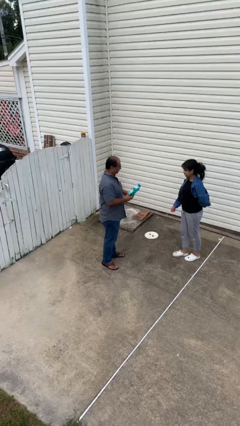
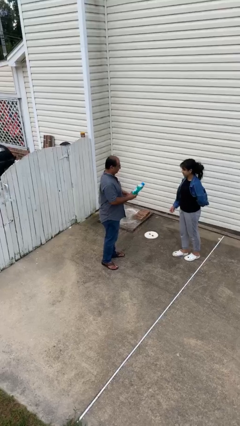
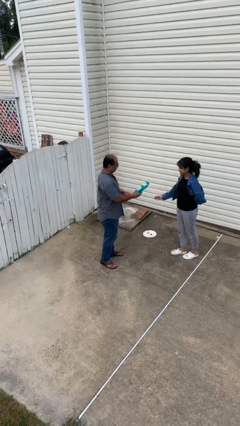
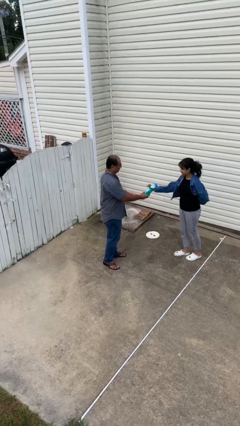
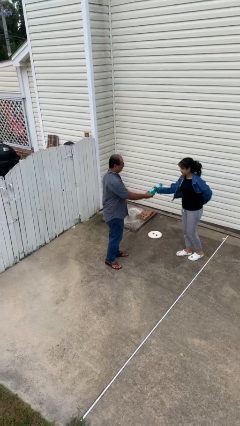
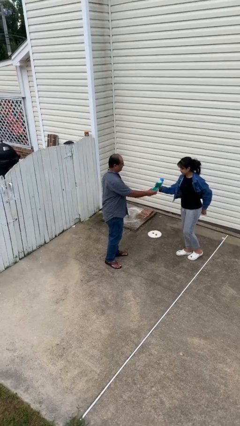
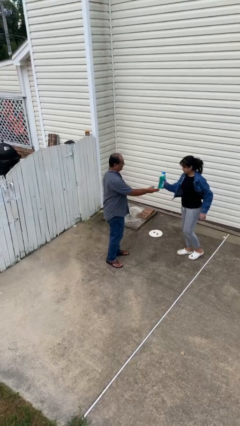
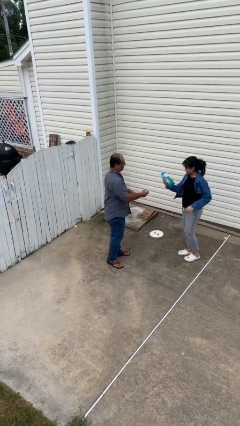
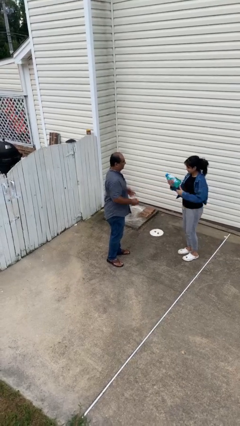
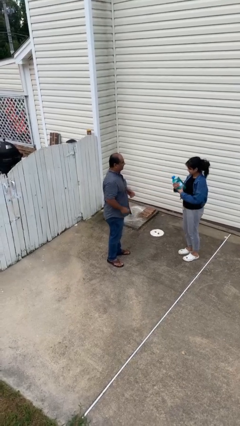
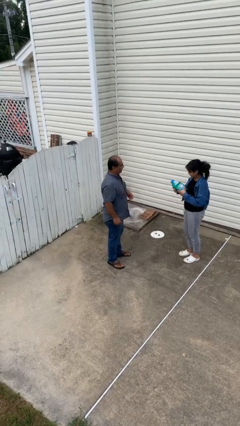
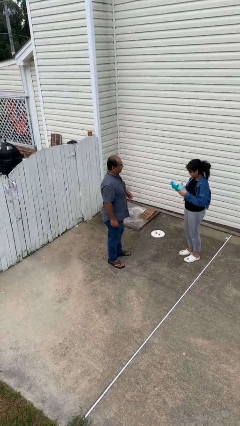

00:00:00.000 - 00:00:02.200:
person transfers object to person

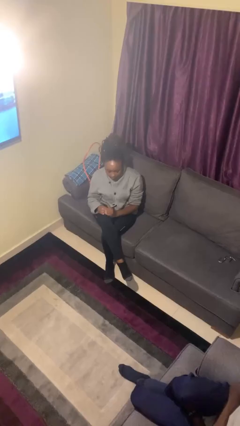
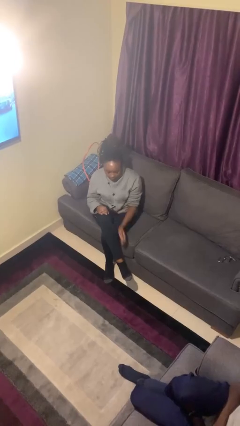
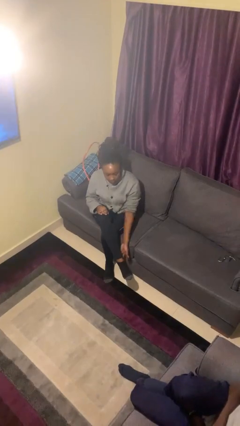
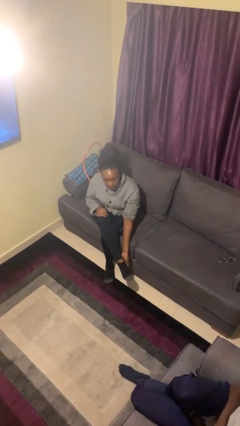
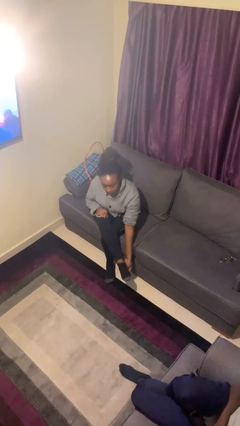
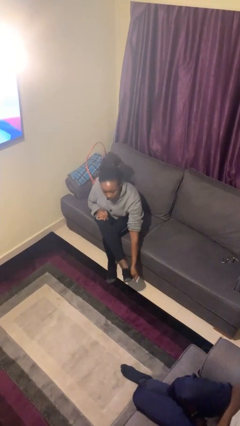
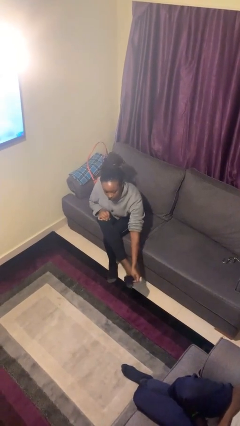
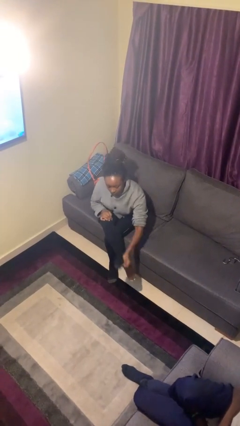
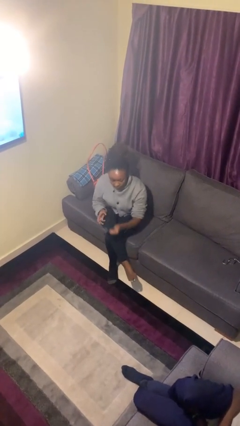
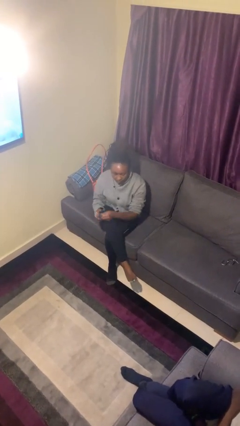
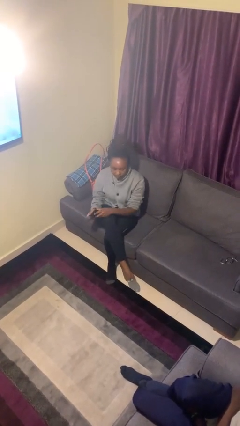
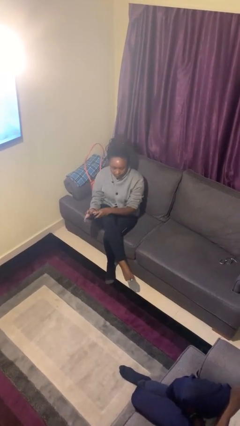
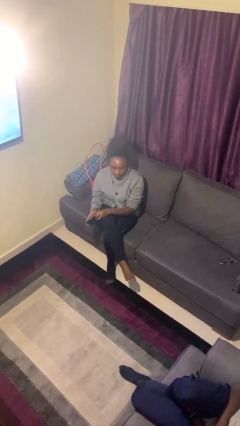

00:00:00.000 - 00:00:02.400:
person takes off socks

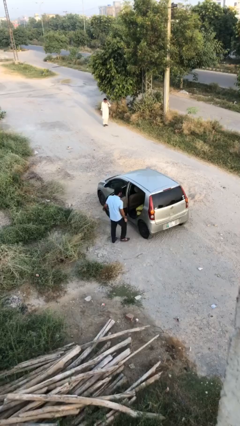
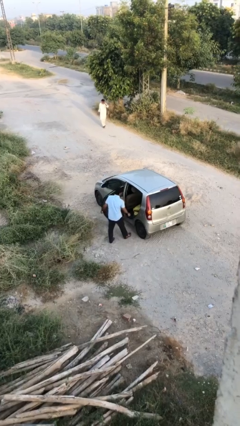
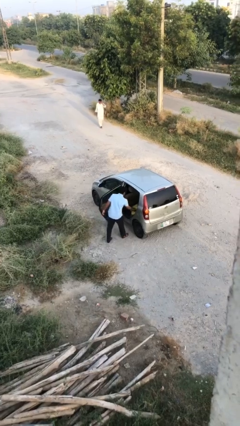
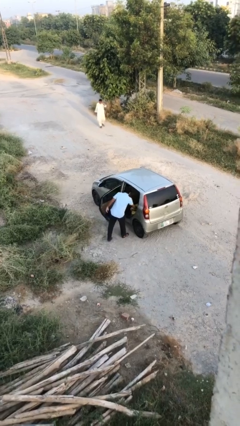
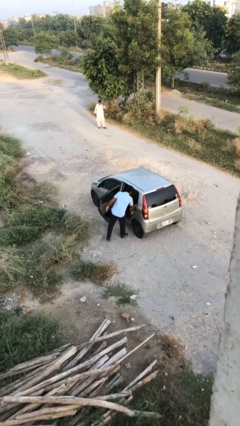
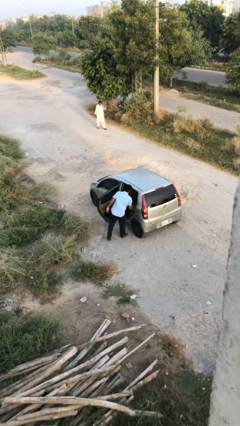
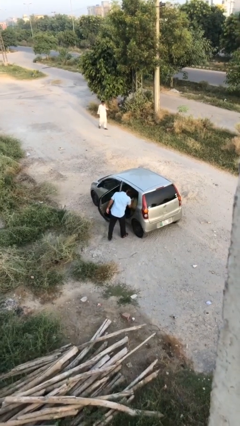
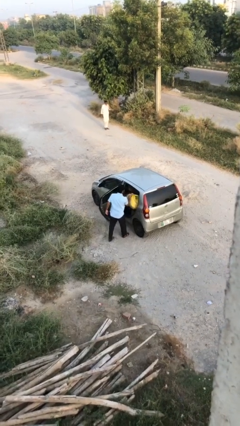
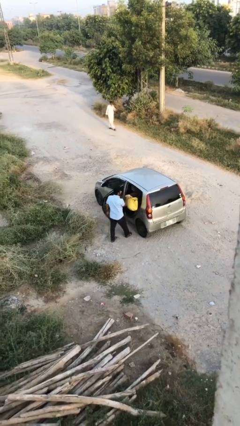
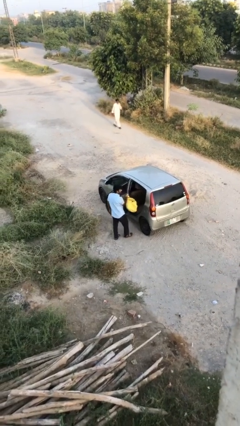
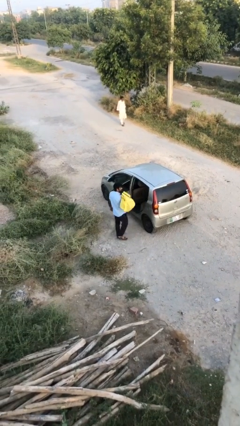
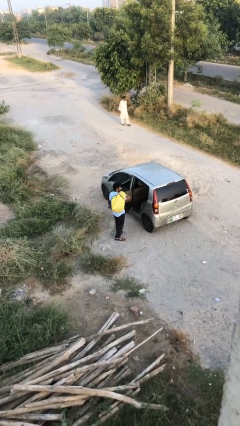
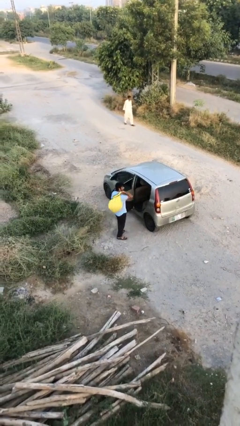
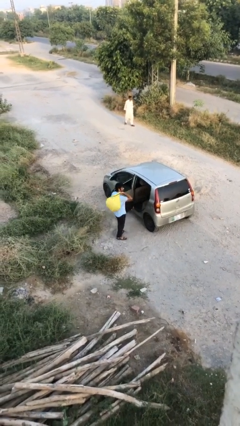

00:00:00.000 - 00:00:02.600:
person unloads car

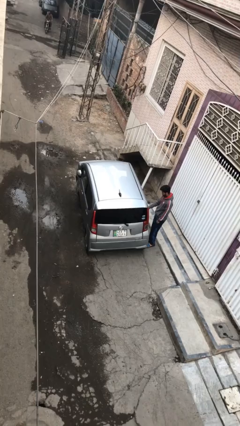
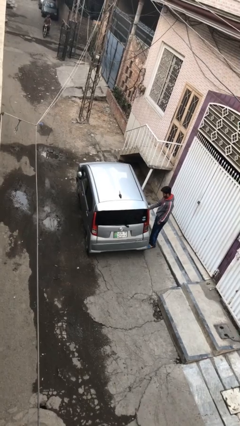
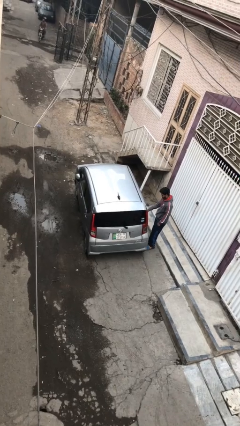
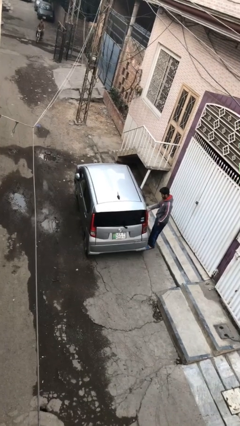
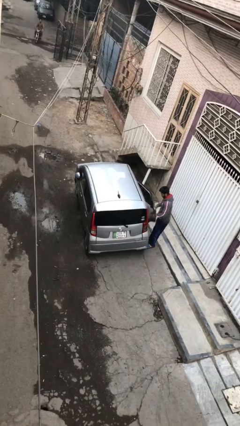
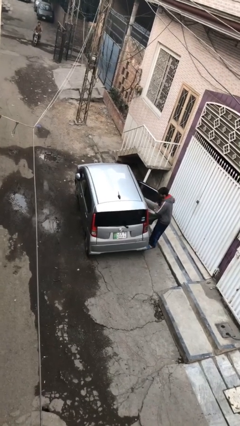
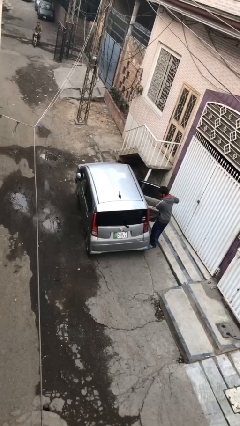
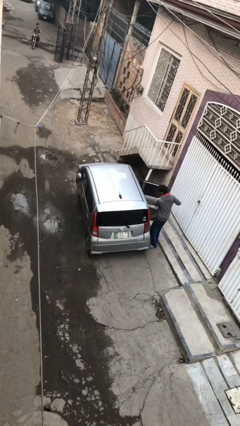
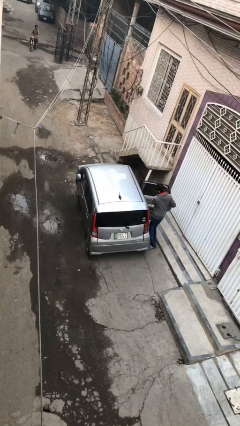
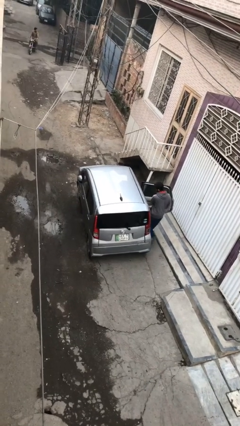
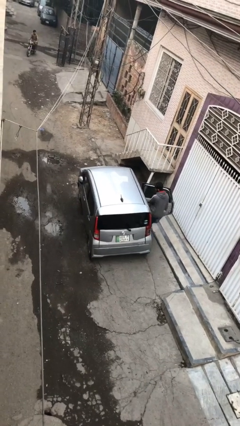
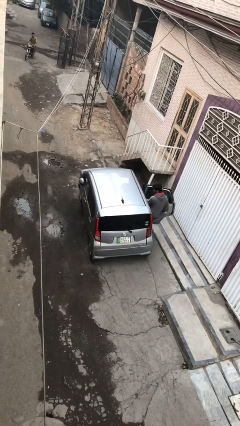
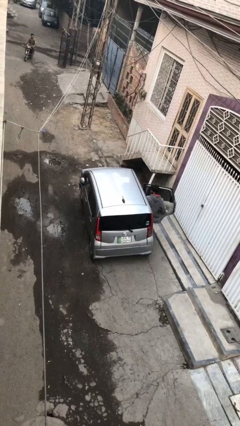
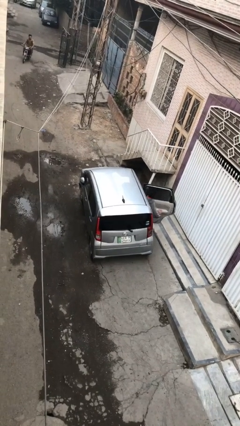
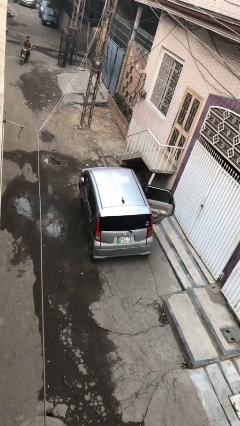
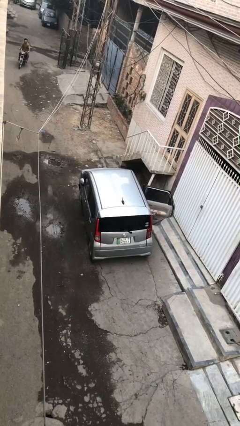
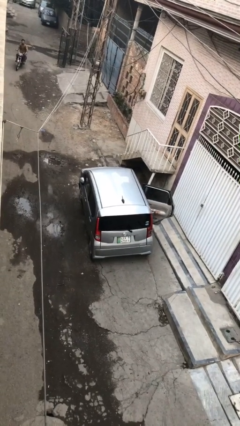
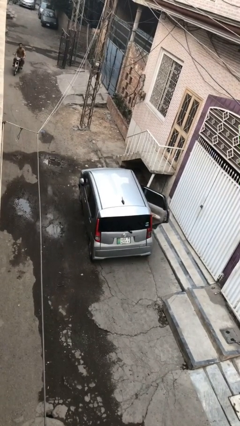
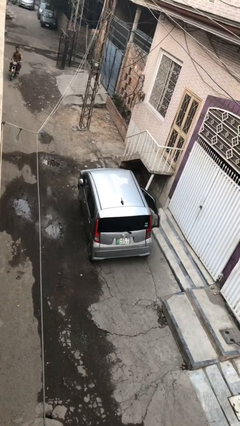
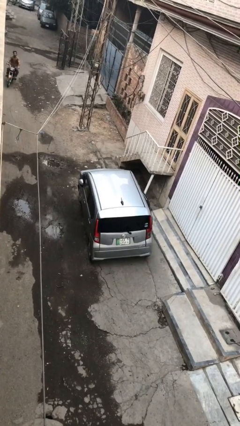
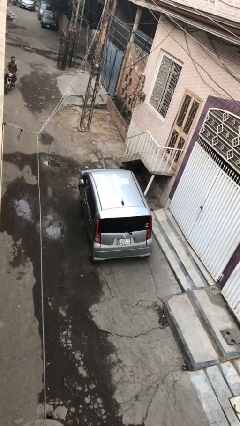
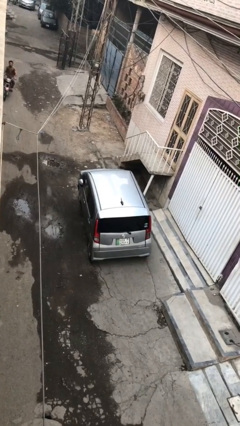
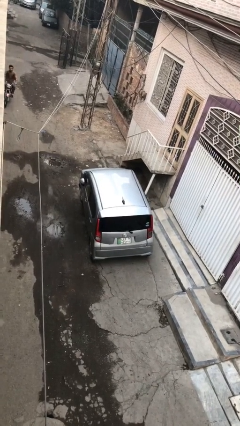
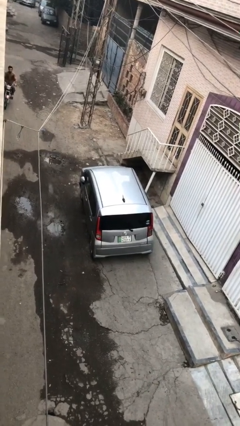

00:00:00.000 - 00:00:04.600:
car picks up person

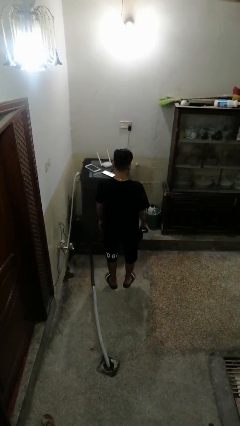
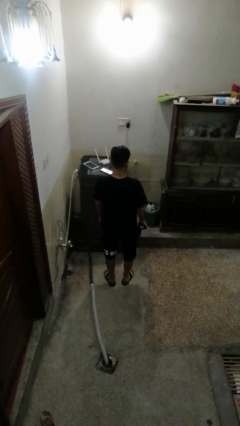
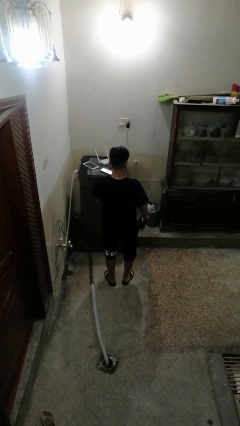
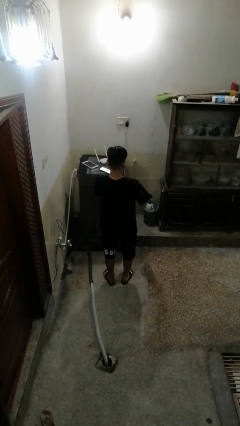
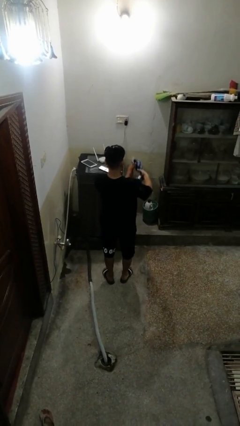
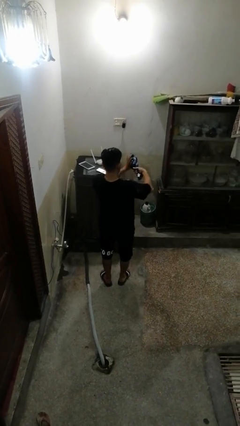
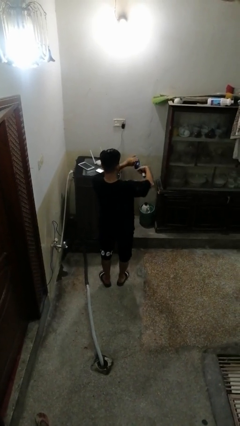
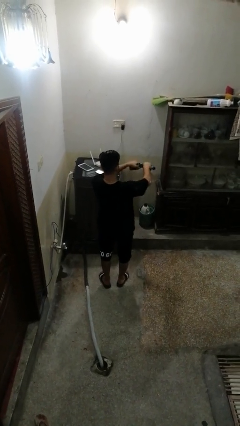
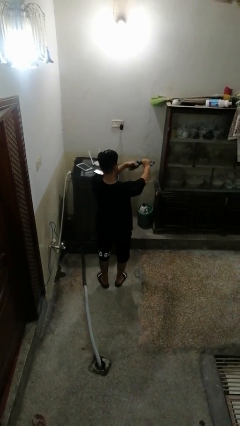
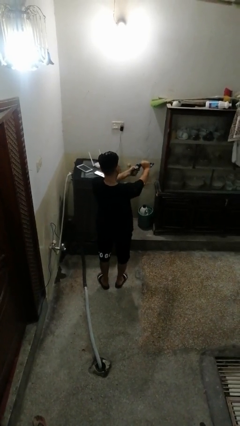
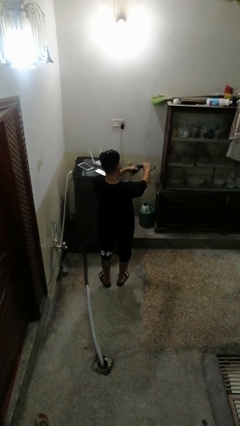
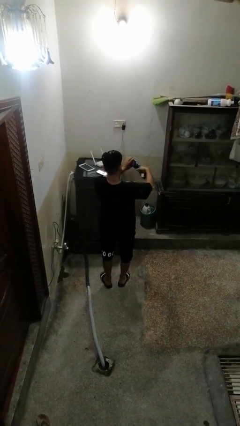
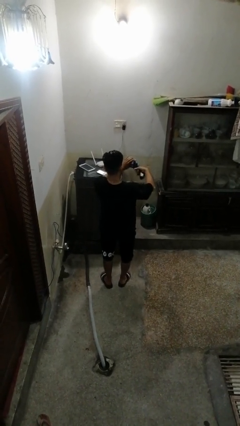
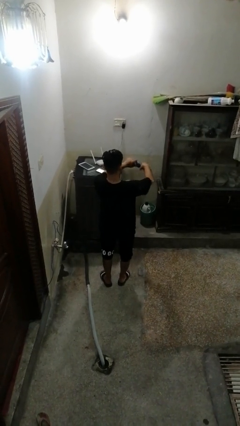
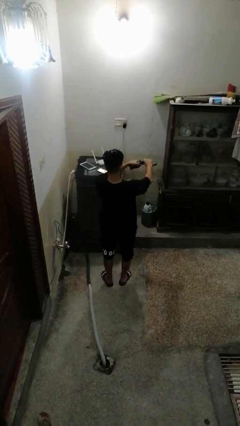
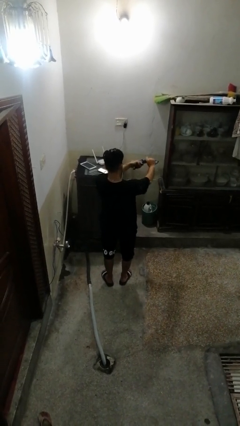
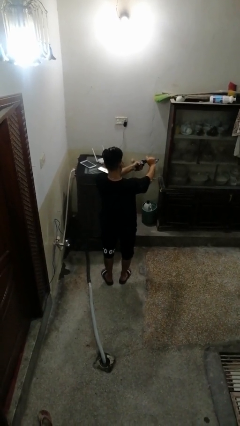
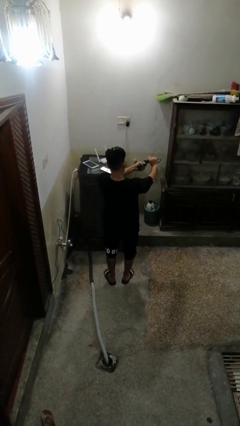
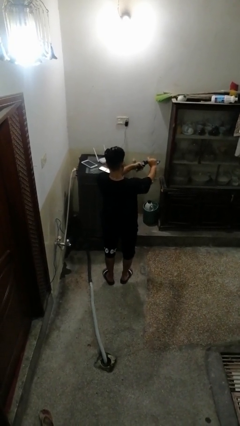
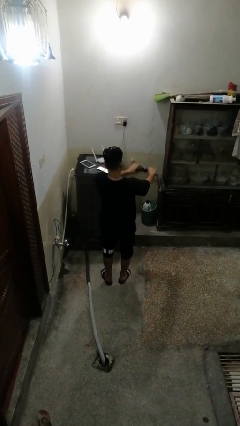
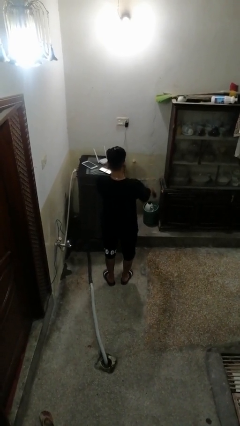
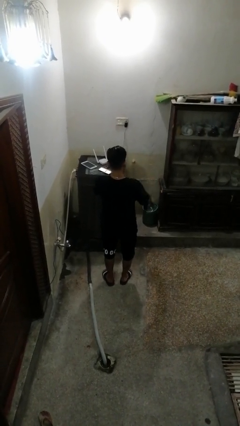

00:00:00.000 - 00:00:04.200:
person squeezes object

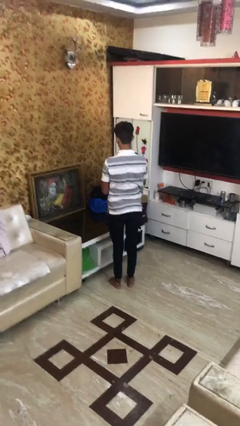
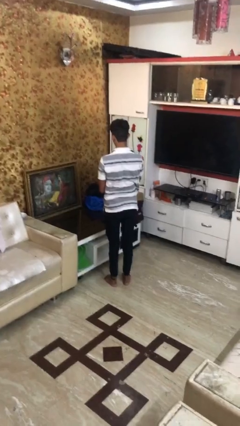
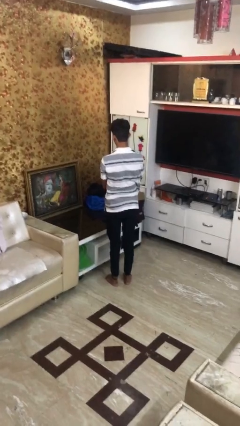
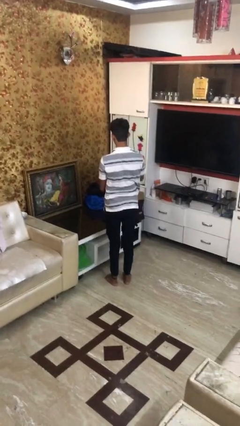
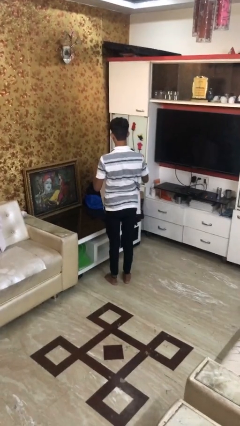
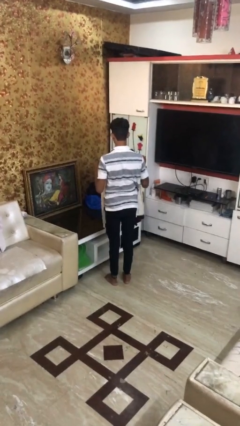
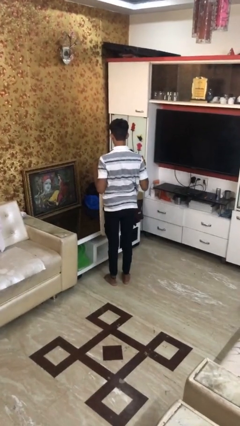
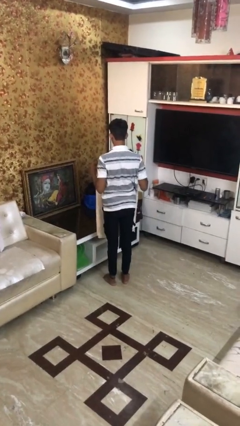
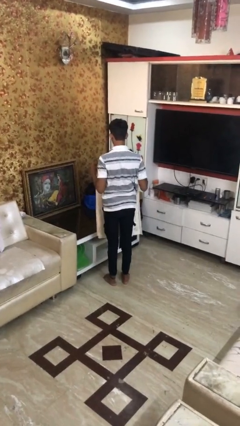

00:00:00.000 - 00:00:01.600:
person folds tablecloth
